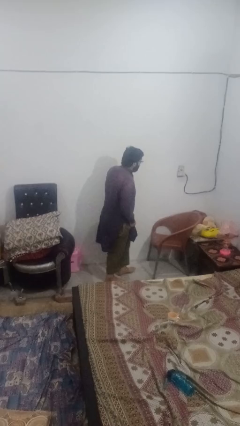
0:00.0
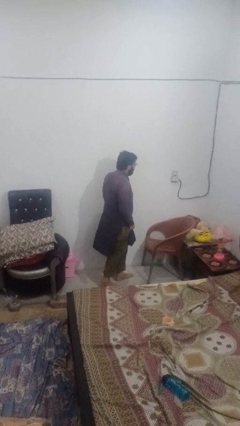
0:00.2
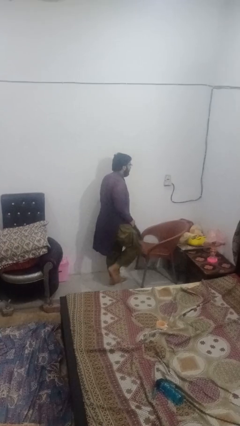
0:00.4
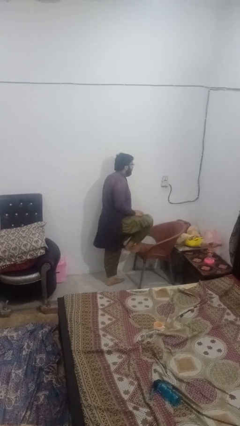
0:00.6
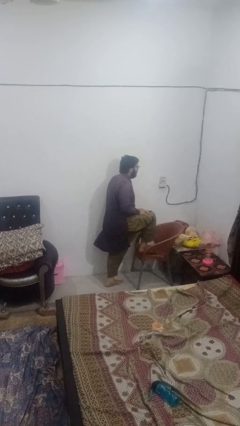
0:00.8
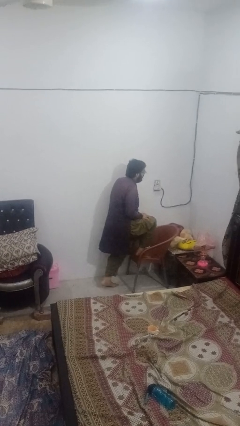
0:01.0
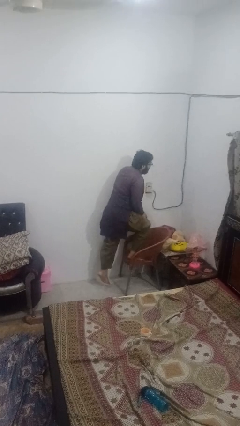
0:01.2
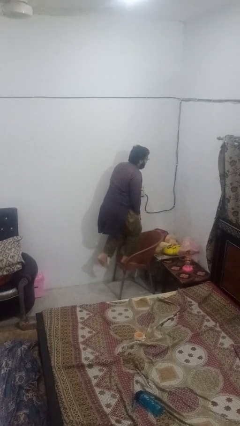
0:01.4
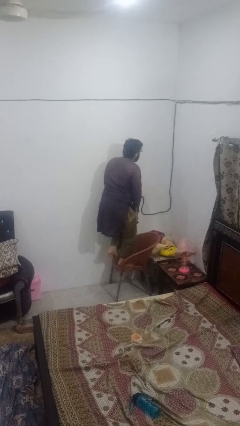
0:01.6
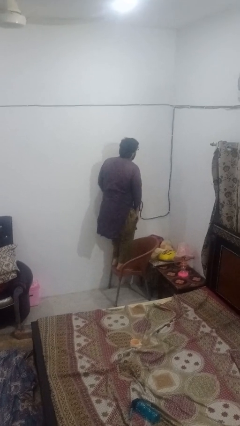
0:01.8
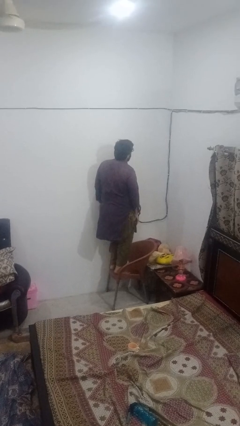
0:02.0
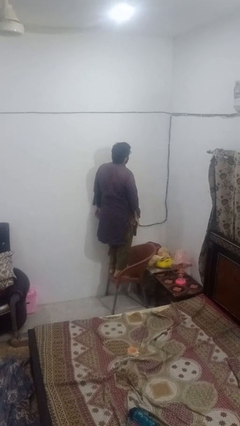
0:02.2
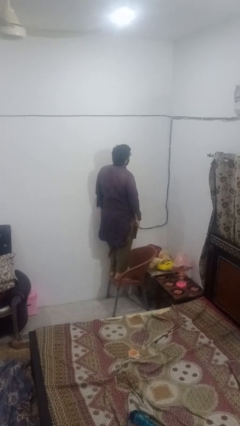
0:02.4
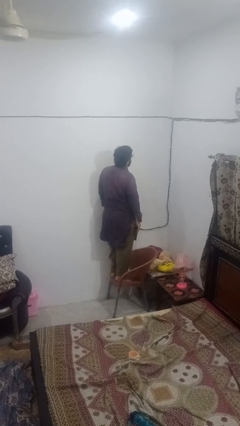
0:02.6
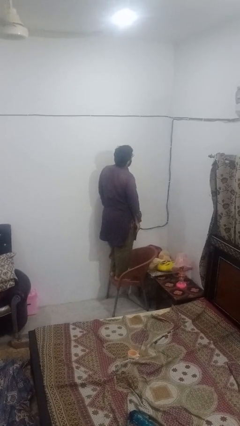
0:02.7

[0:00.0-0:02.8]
person climbs on chair

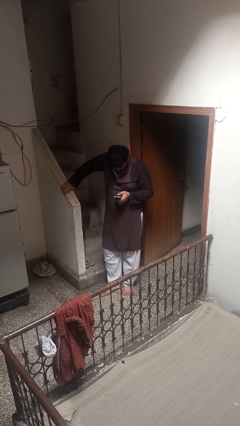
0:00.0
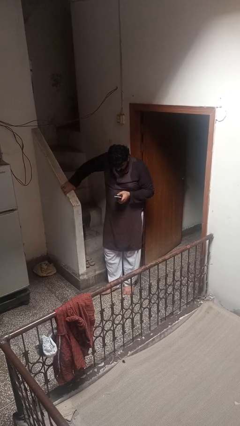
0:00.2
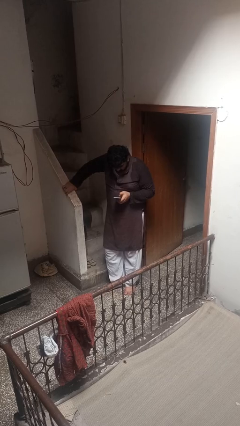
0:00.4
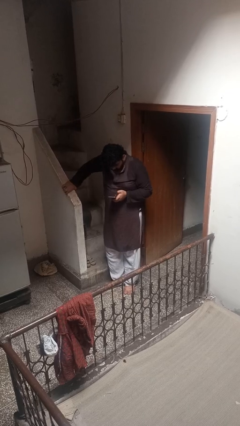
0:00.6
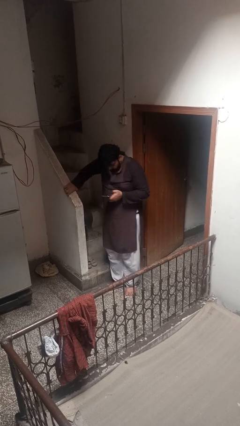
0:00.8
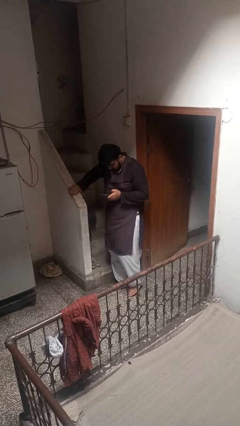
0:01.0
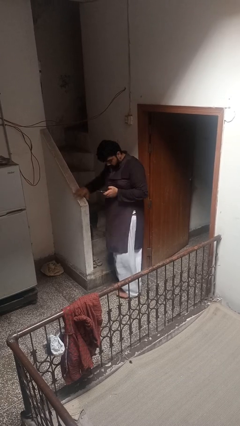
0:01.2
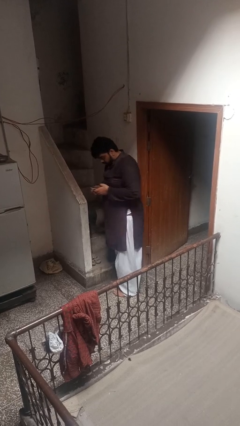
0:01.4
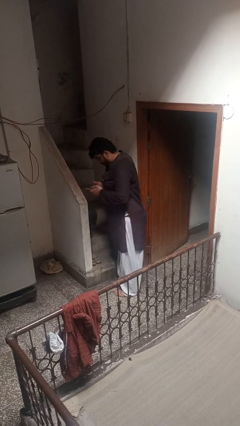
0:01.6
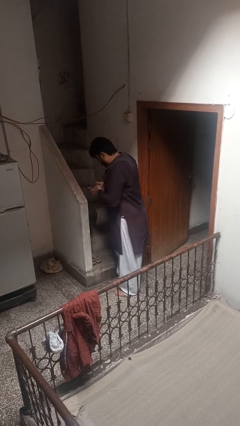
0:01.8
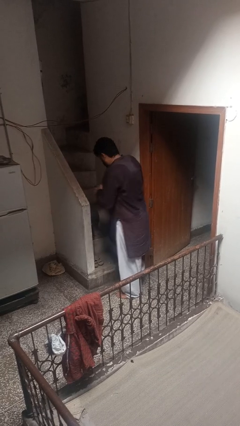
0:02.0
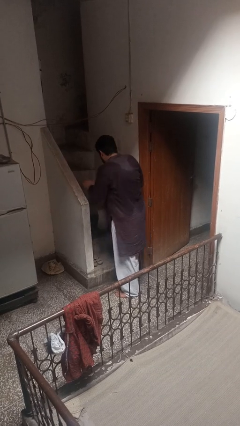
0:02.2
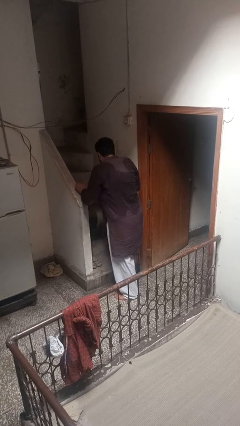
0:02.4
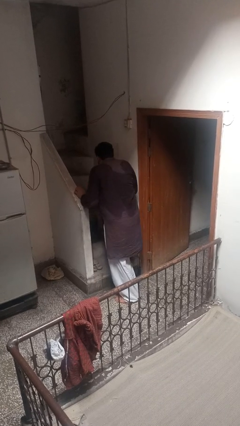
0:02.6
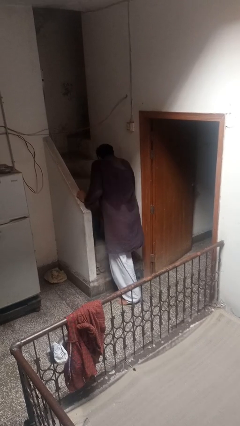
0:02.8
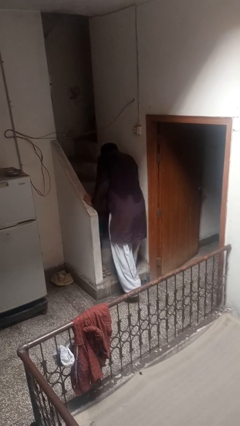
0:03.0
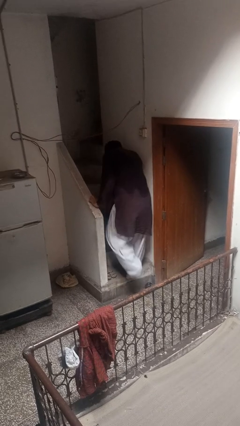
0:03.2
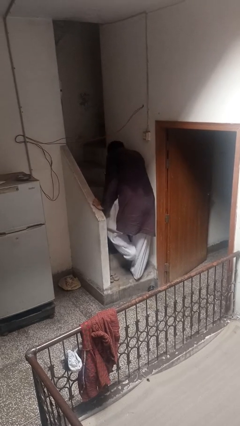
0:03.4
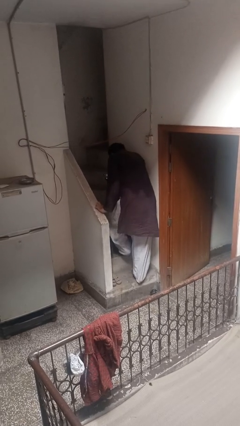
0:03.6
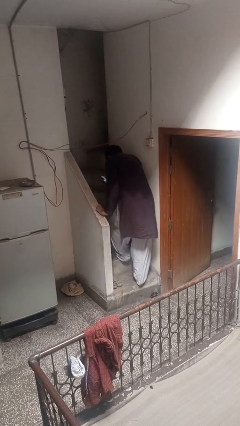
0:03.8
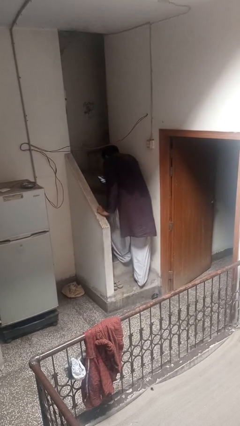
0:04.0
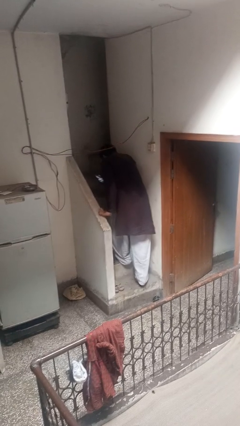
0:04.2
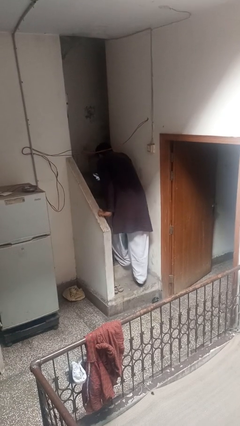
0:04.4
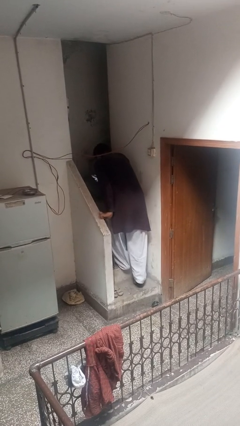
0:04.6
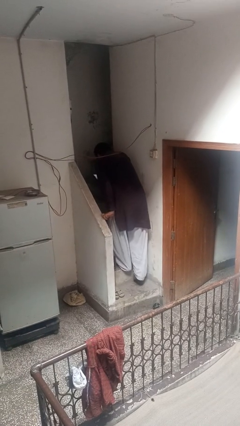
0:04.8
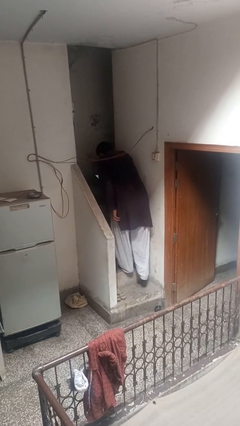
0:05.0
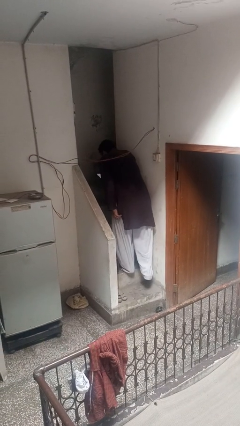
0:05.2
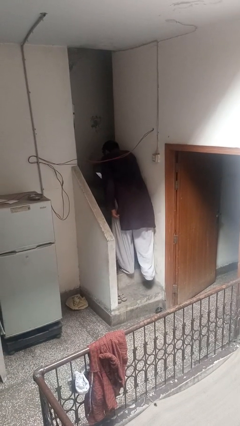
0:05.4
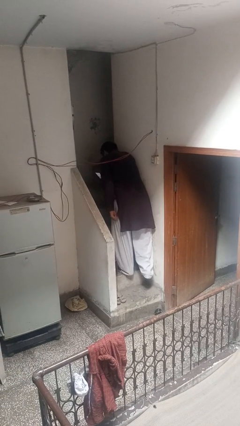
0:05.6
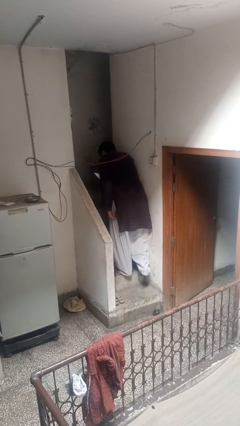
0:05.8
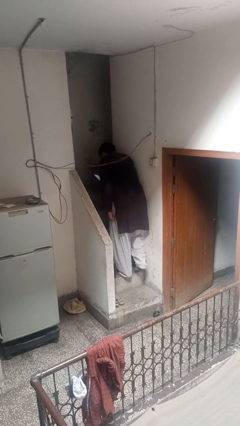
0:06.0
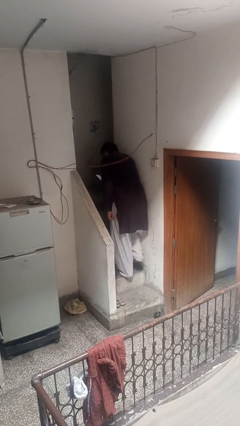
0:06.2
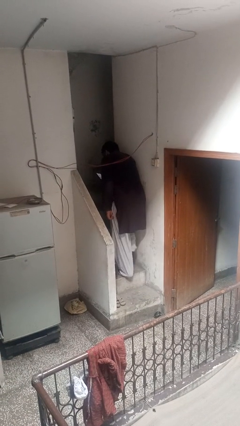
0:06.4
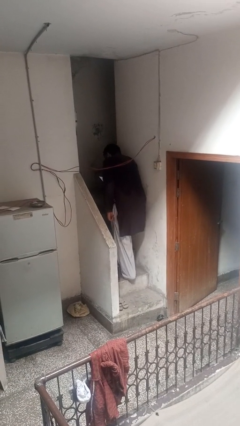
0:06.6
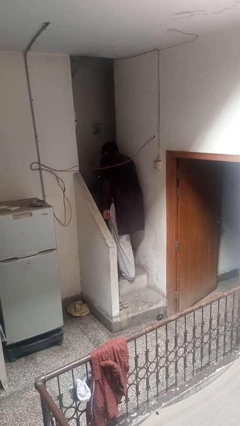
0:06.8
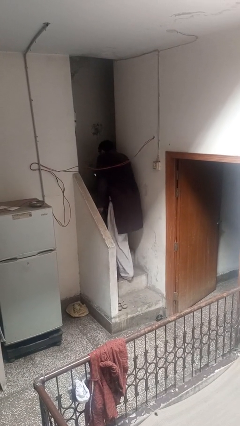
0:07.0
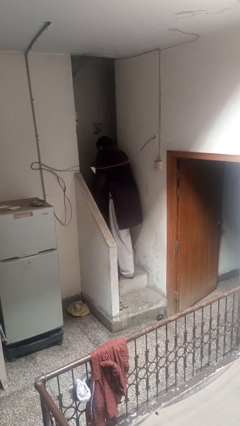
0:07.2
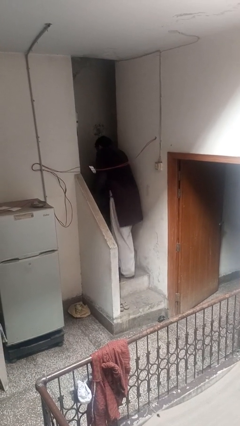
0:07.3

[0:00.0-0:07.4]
person climbs up stairs

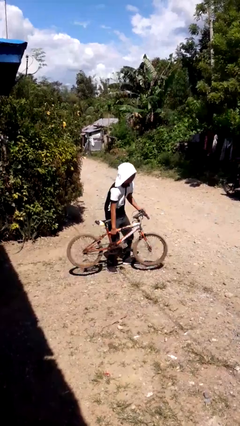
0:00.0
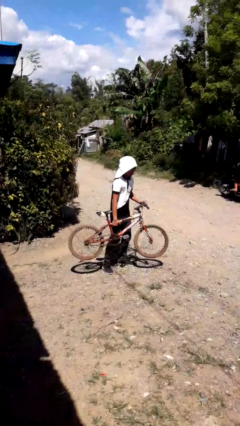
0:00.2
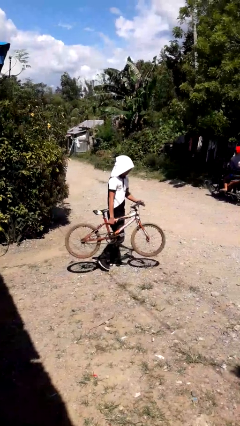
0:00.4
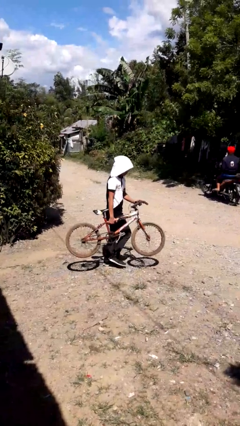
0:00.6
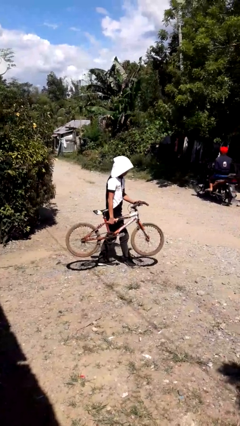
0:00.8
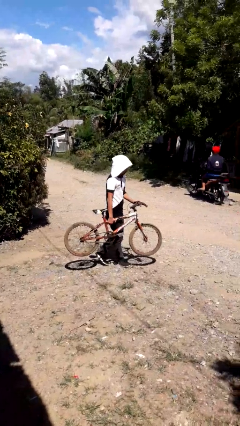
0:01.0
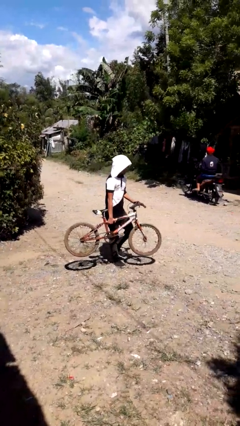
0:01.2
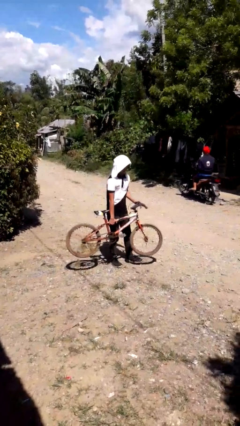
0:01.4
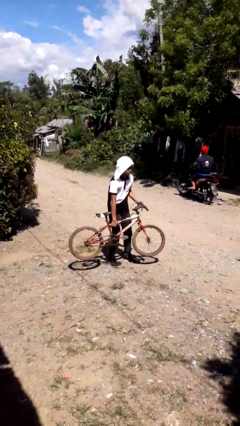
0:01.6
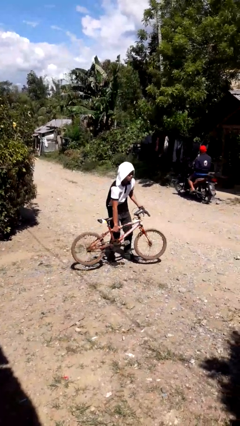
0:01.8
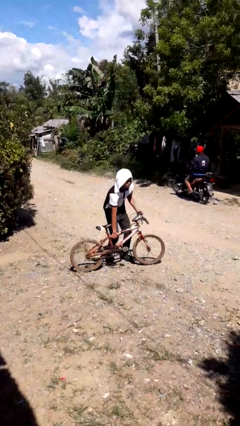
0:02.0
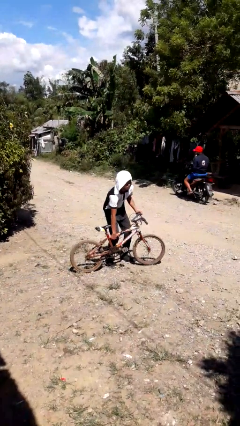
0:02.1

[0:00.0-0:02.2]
person carries bicycle

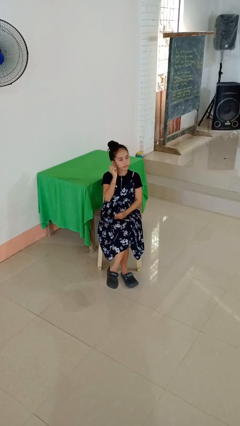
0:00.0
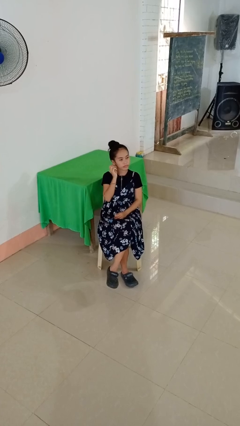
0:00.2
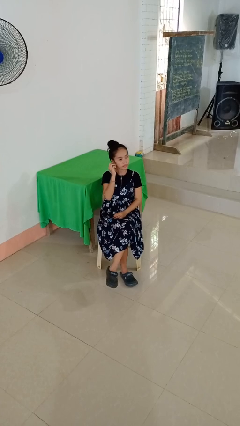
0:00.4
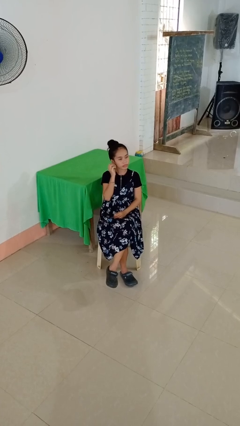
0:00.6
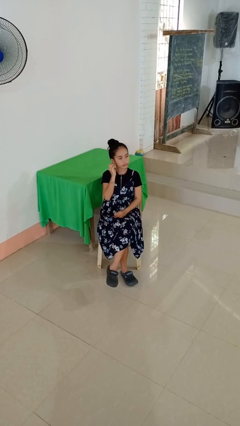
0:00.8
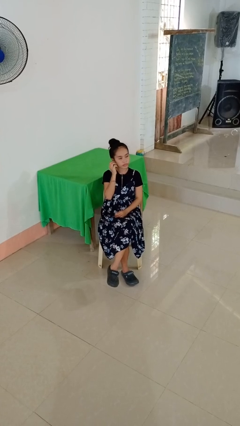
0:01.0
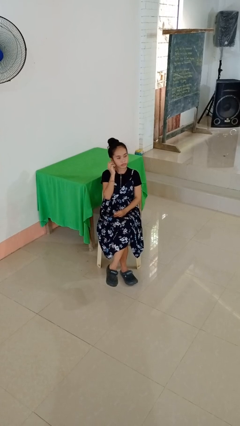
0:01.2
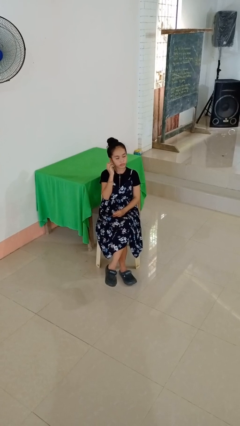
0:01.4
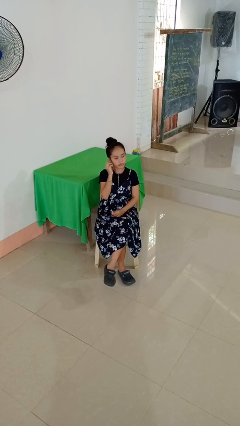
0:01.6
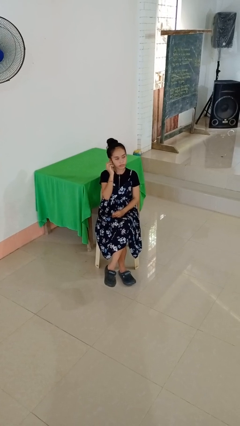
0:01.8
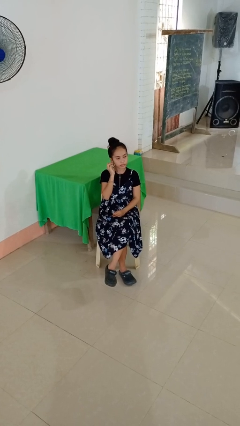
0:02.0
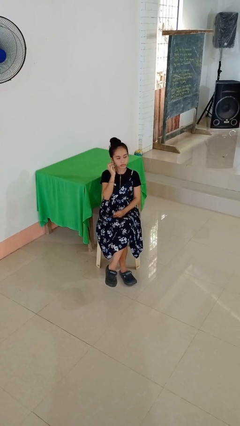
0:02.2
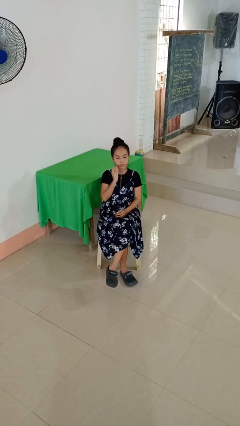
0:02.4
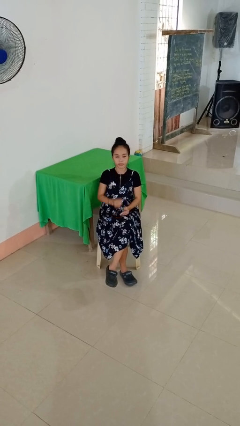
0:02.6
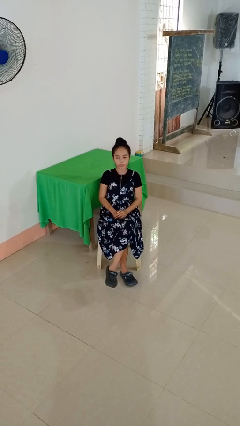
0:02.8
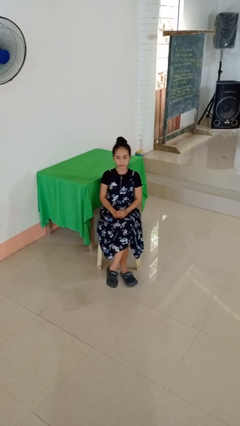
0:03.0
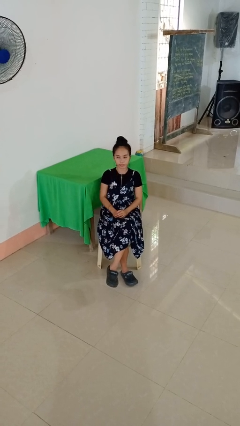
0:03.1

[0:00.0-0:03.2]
person touches earlobe

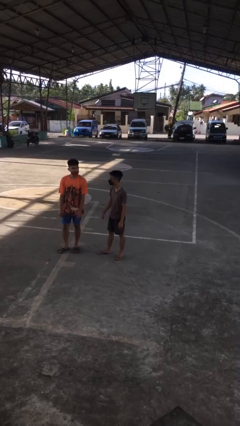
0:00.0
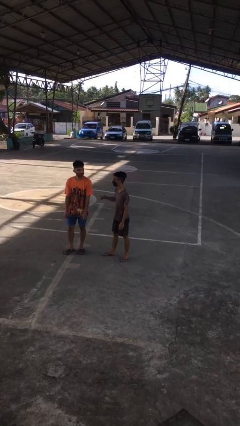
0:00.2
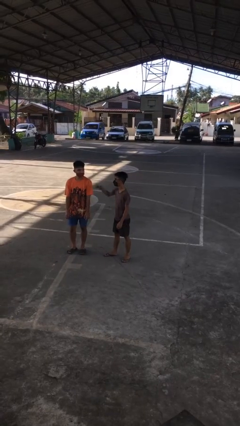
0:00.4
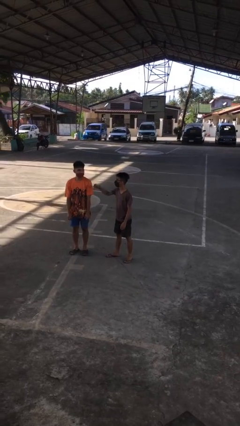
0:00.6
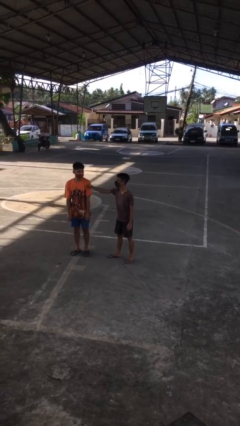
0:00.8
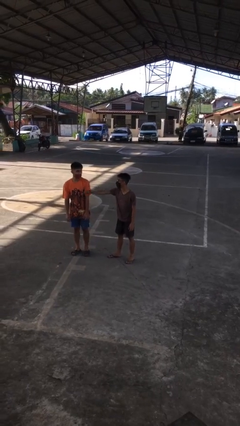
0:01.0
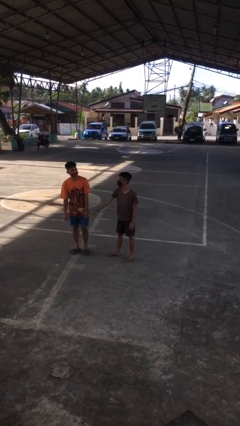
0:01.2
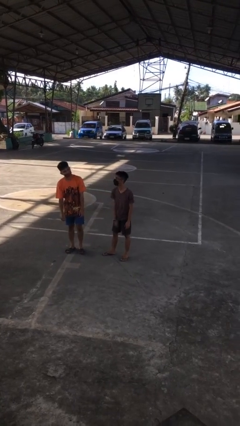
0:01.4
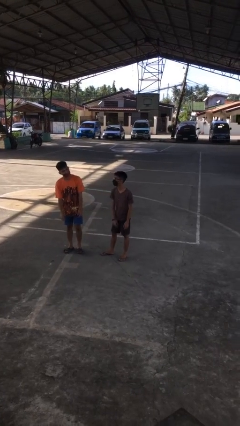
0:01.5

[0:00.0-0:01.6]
person pounds shoulders of person

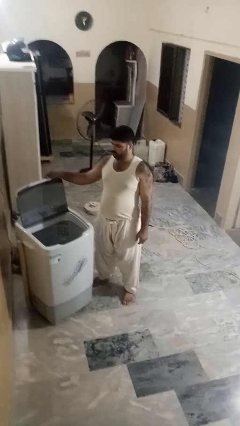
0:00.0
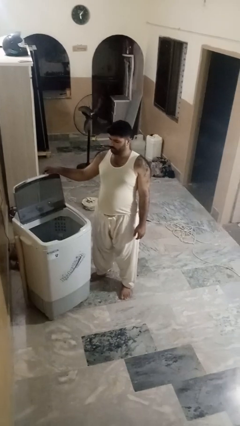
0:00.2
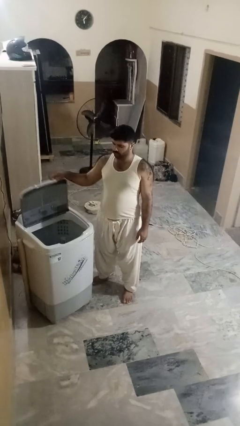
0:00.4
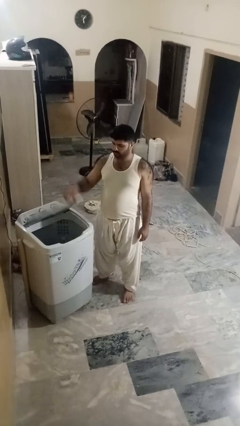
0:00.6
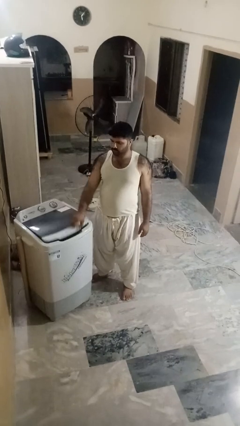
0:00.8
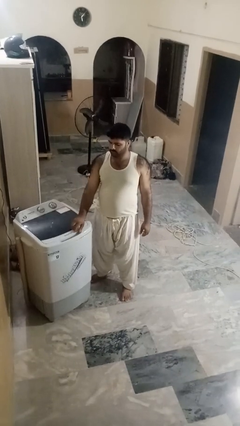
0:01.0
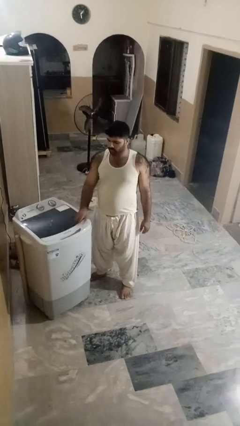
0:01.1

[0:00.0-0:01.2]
person closes clothes washer
